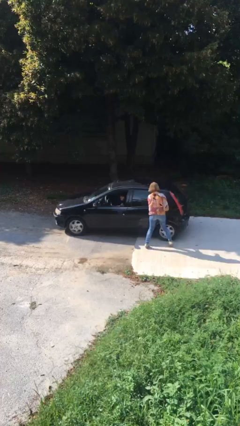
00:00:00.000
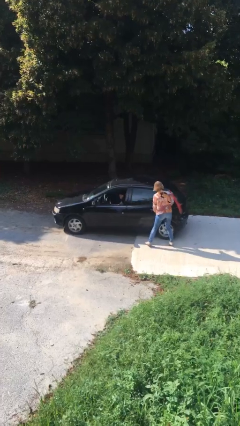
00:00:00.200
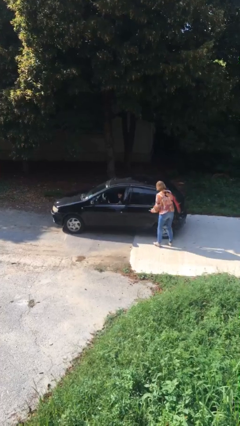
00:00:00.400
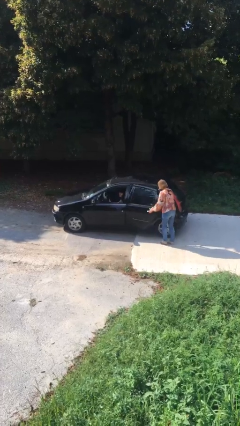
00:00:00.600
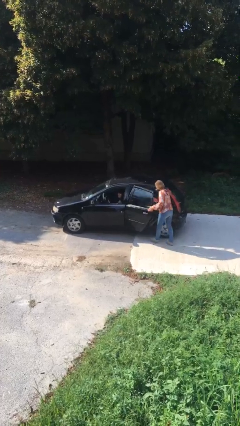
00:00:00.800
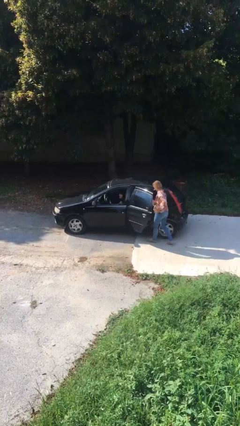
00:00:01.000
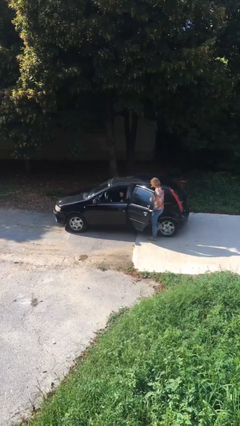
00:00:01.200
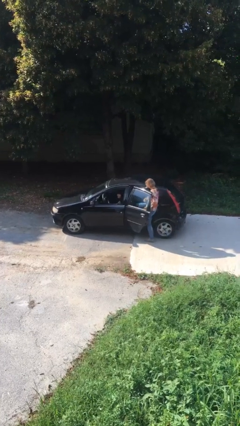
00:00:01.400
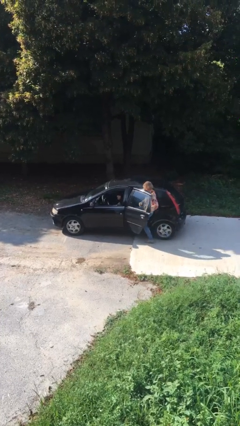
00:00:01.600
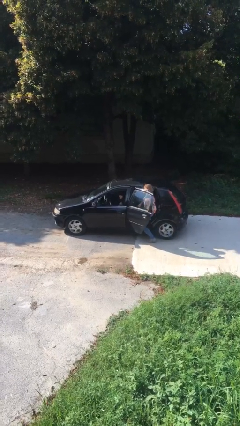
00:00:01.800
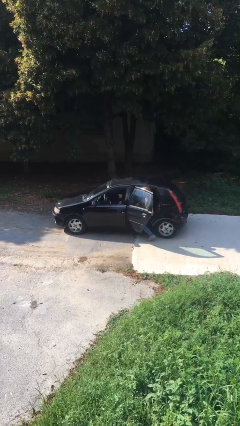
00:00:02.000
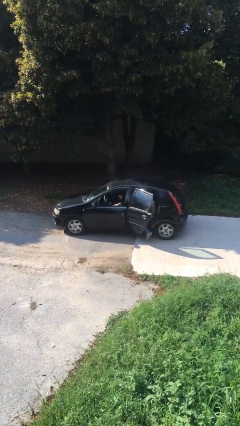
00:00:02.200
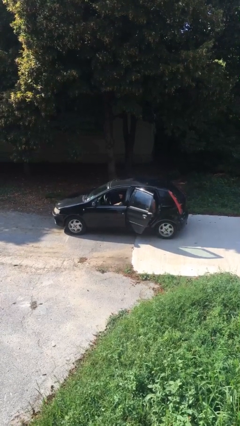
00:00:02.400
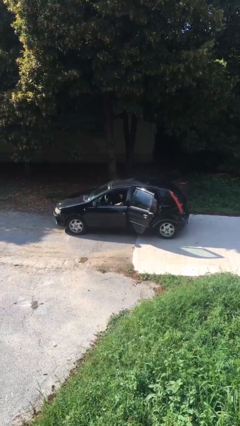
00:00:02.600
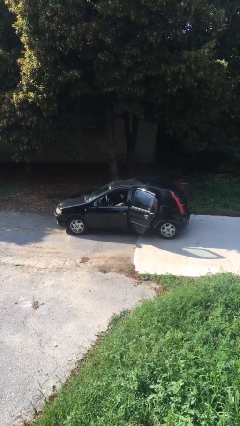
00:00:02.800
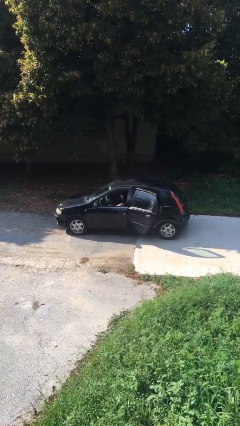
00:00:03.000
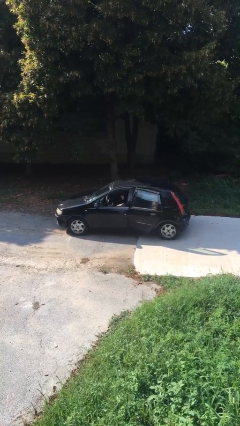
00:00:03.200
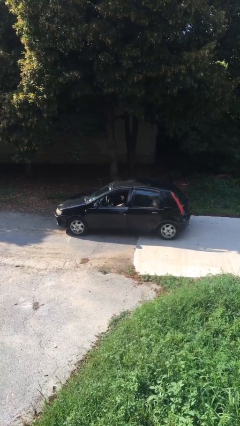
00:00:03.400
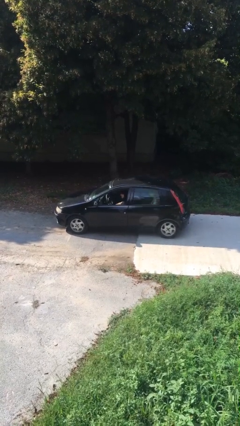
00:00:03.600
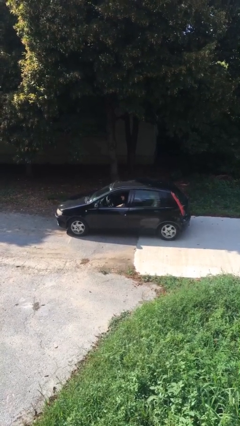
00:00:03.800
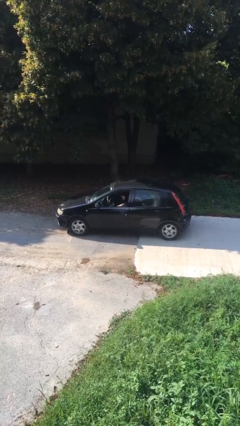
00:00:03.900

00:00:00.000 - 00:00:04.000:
car picks up person

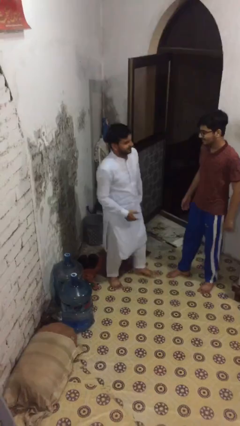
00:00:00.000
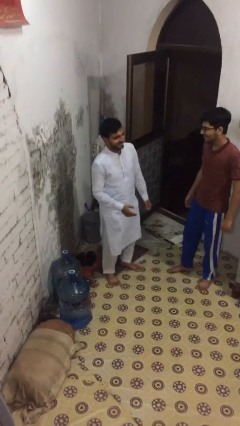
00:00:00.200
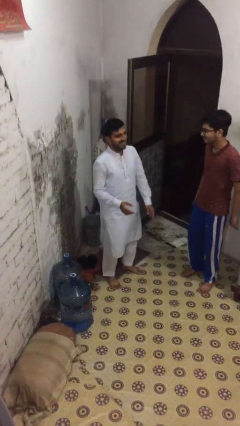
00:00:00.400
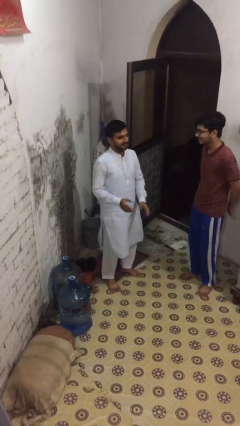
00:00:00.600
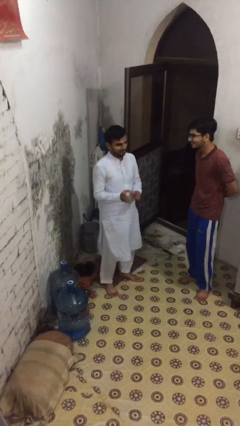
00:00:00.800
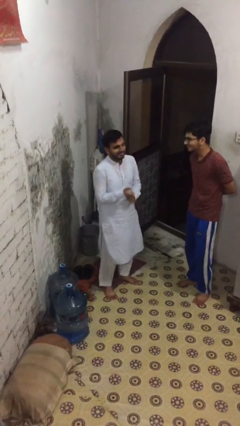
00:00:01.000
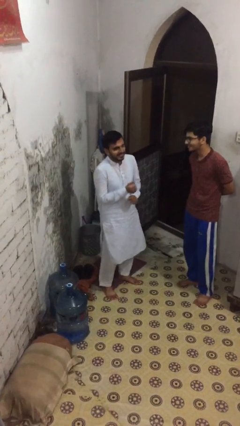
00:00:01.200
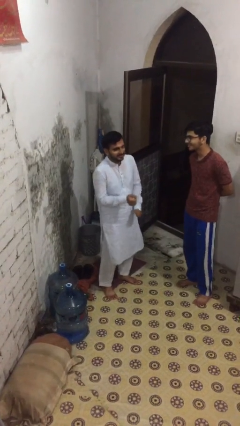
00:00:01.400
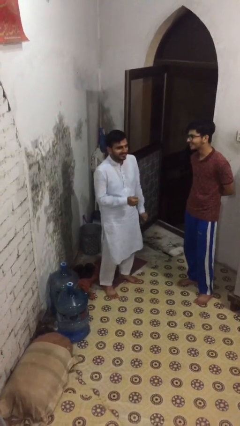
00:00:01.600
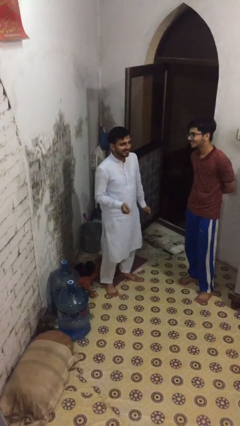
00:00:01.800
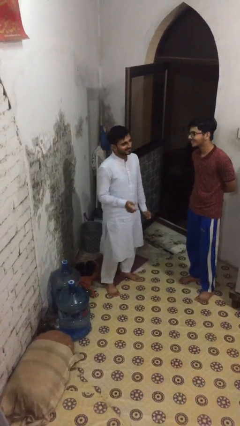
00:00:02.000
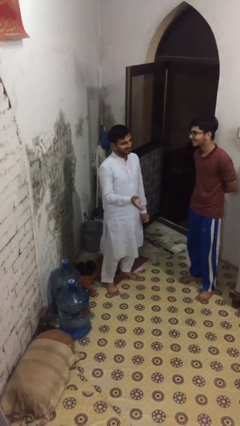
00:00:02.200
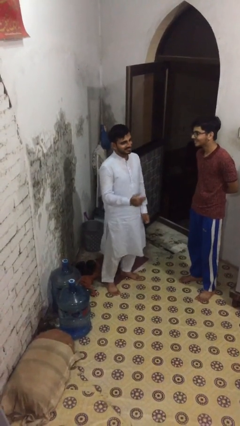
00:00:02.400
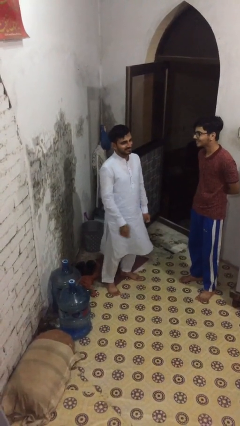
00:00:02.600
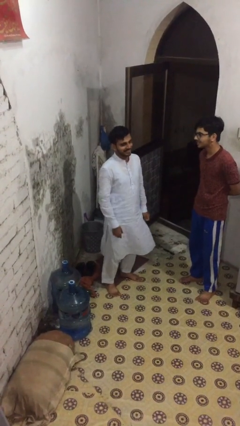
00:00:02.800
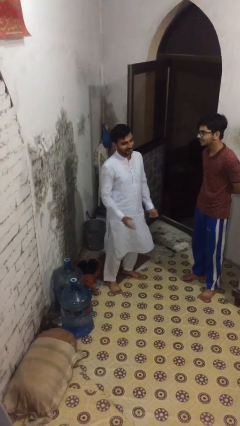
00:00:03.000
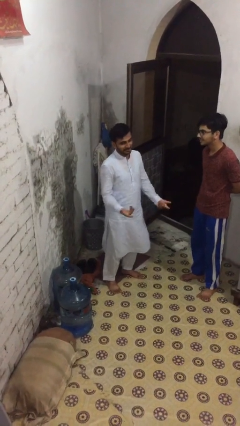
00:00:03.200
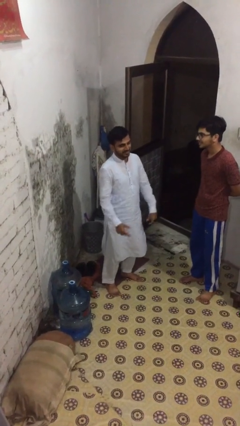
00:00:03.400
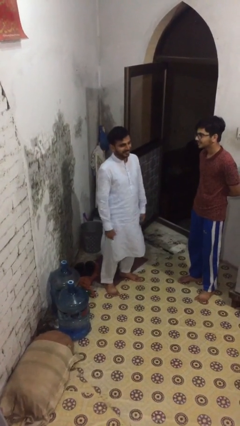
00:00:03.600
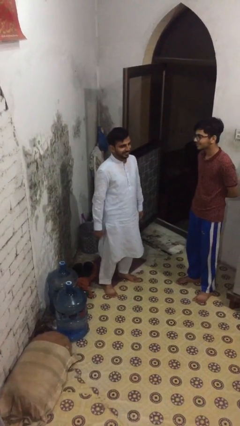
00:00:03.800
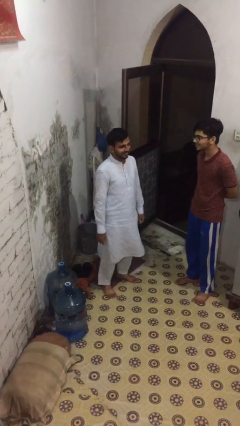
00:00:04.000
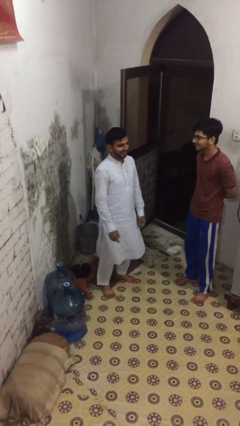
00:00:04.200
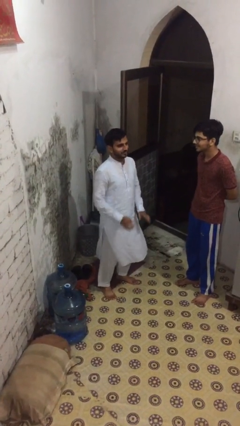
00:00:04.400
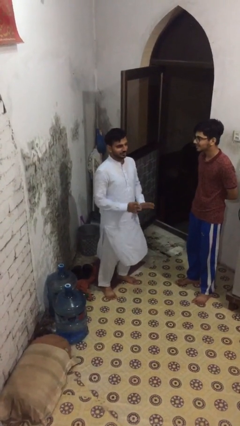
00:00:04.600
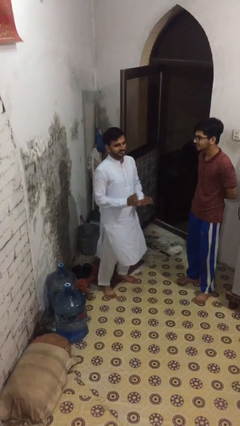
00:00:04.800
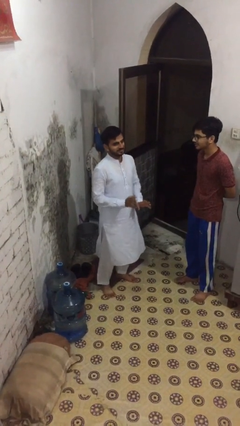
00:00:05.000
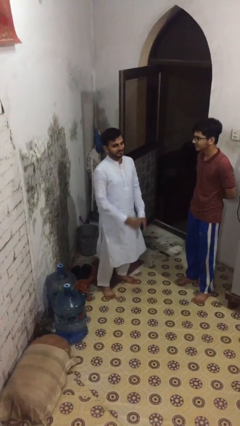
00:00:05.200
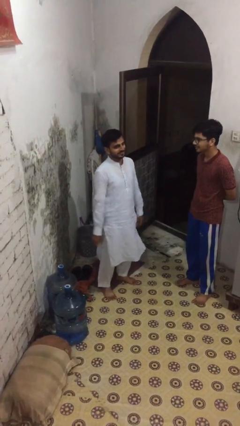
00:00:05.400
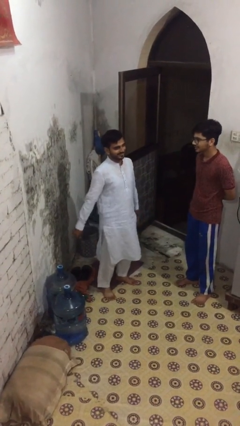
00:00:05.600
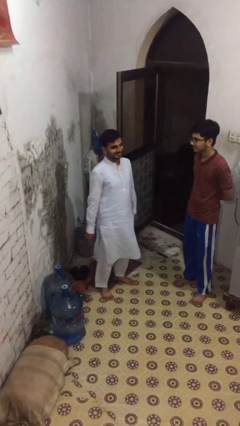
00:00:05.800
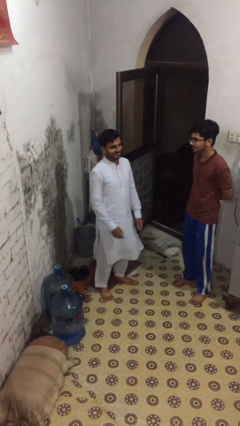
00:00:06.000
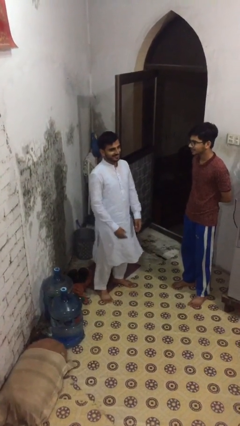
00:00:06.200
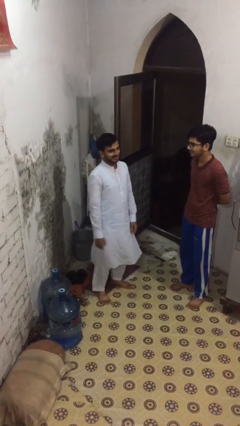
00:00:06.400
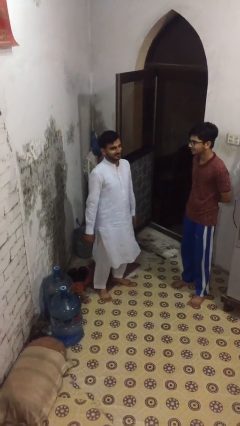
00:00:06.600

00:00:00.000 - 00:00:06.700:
person talks to person

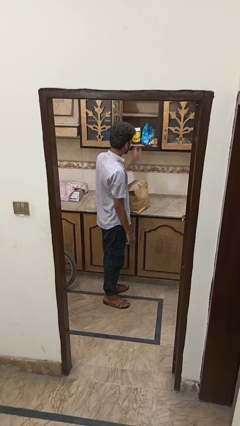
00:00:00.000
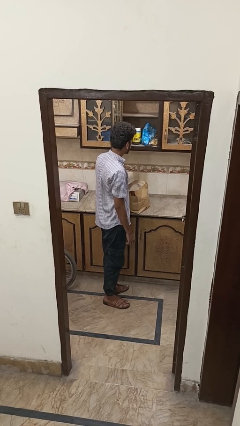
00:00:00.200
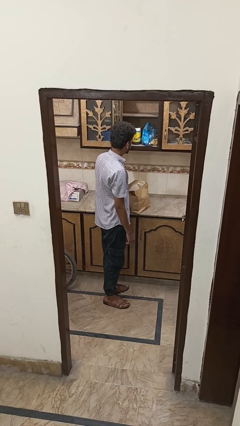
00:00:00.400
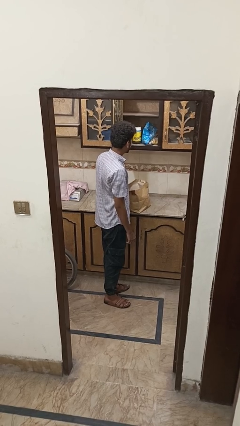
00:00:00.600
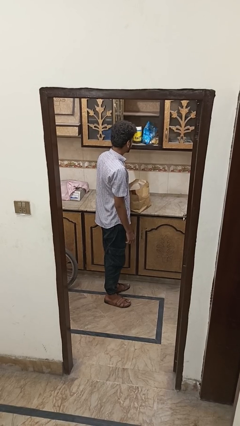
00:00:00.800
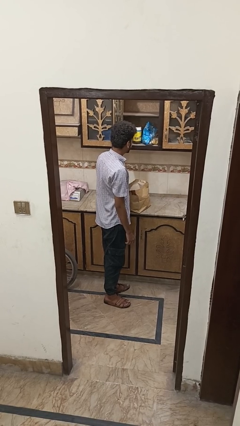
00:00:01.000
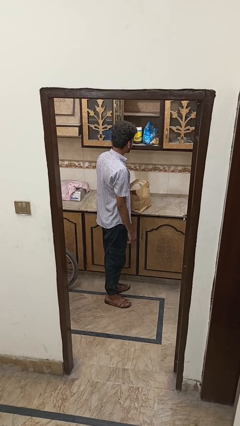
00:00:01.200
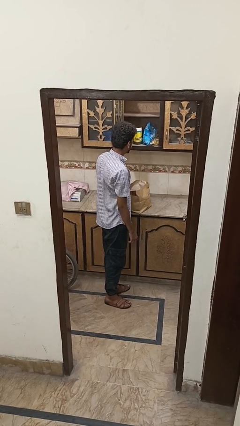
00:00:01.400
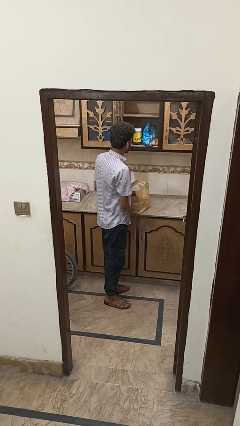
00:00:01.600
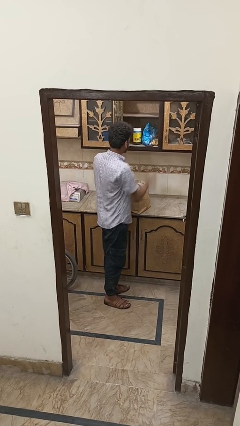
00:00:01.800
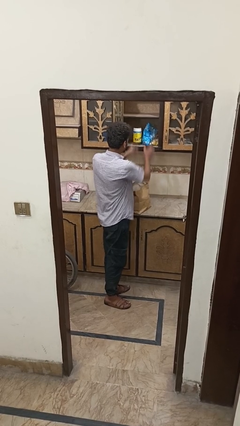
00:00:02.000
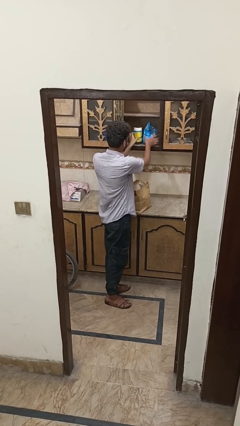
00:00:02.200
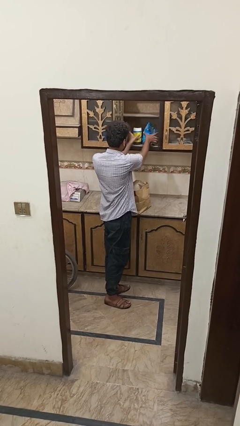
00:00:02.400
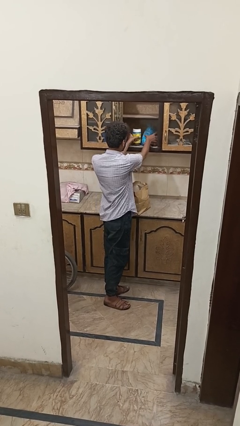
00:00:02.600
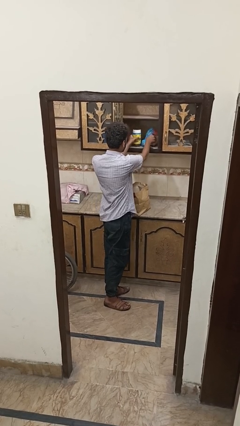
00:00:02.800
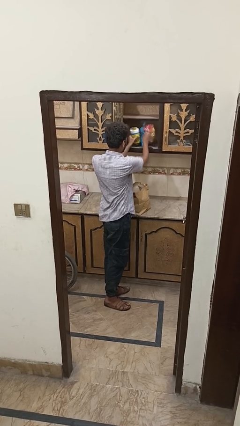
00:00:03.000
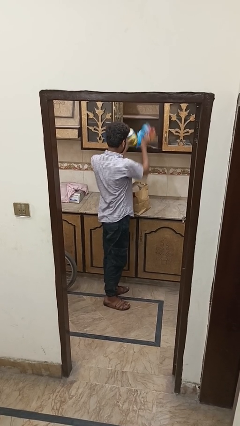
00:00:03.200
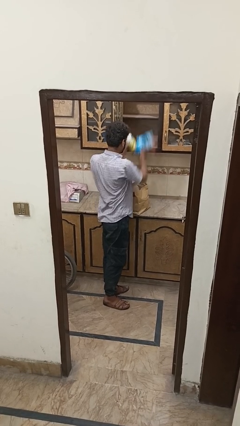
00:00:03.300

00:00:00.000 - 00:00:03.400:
person uncovers with bedsheets

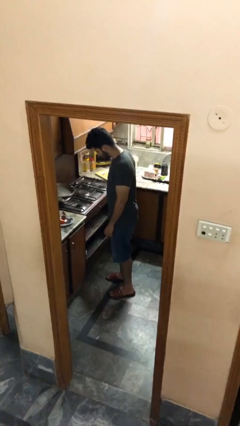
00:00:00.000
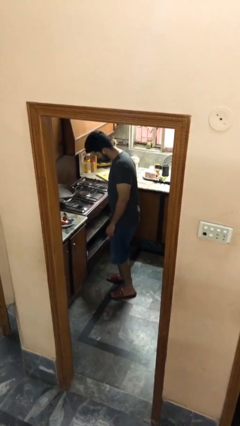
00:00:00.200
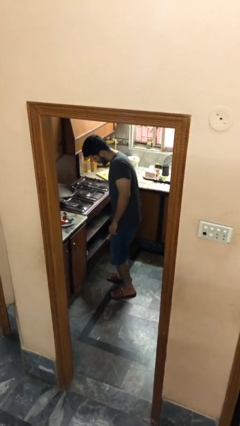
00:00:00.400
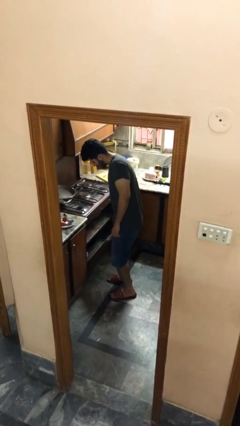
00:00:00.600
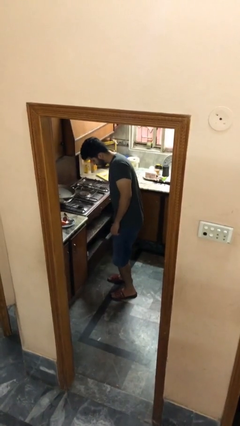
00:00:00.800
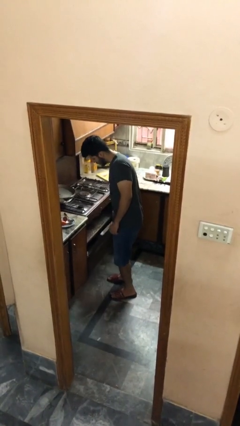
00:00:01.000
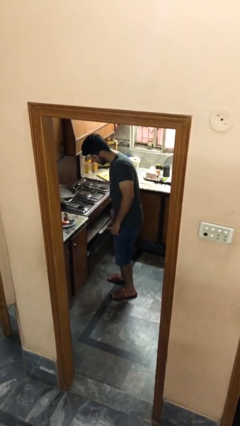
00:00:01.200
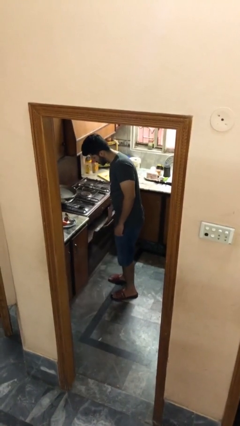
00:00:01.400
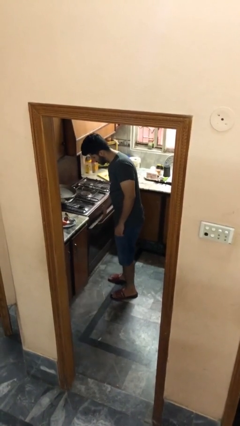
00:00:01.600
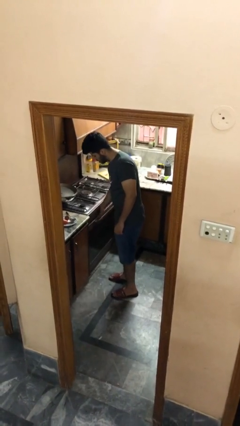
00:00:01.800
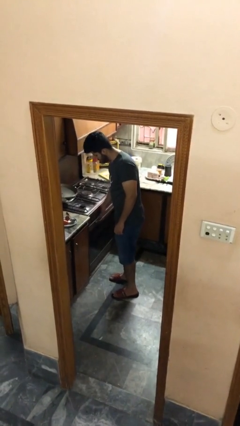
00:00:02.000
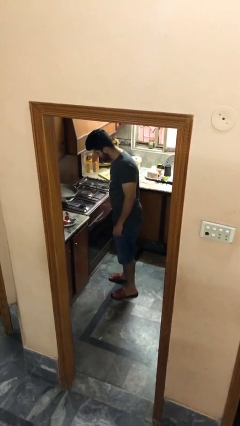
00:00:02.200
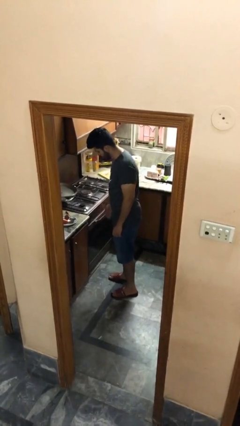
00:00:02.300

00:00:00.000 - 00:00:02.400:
person closes oven door

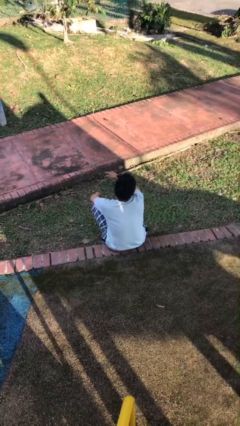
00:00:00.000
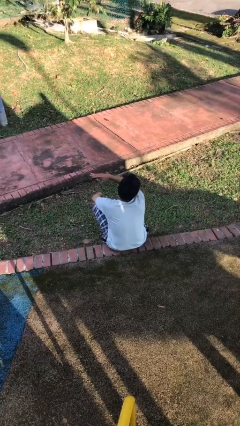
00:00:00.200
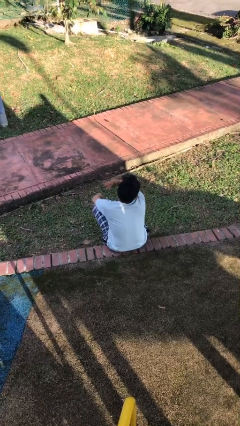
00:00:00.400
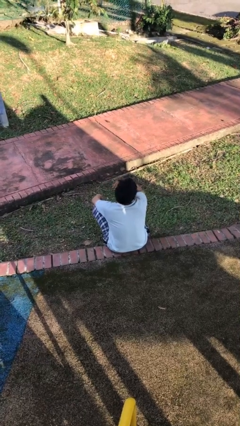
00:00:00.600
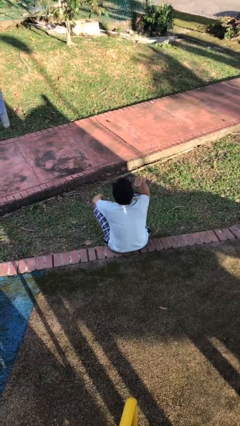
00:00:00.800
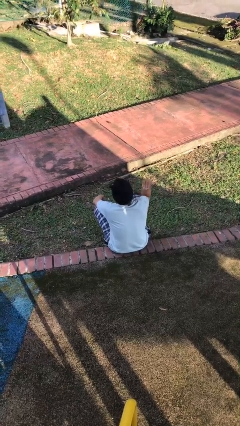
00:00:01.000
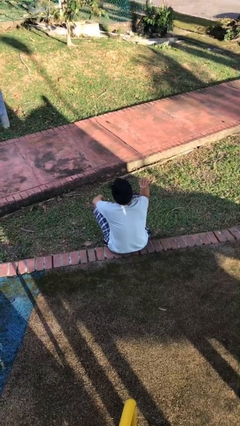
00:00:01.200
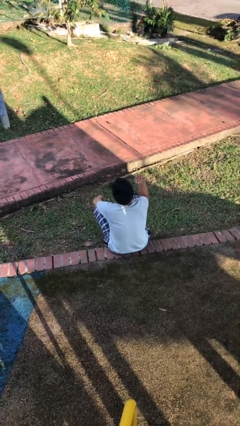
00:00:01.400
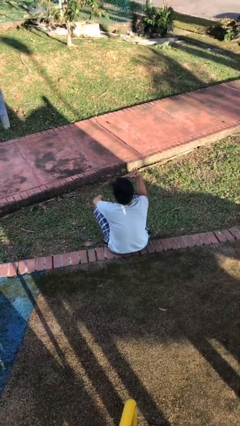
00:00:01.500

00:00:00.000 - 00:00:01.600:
person gestures cut
